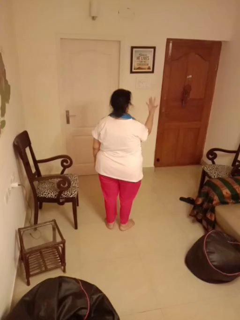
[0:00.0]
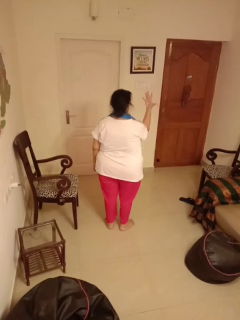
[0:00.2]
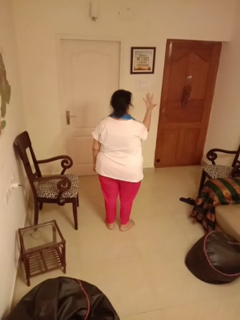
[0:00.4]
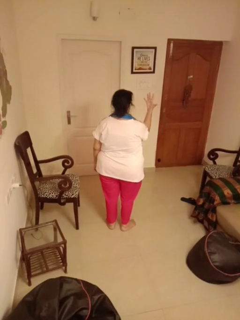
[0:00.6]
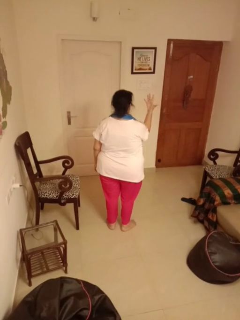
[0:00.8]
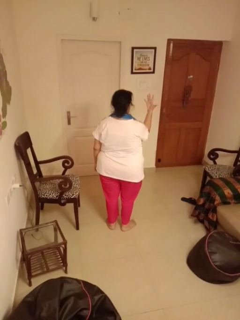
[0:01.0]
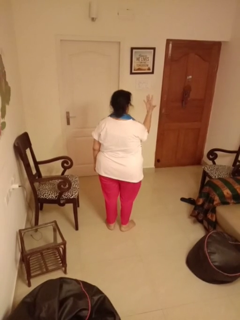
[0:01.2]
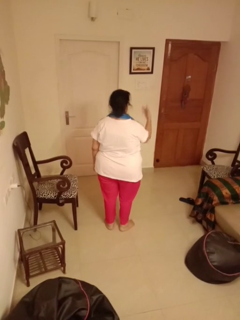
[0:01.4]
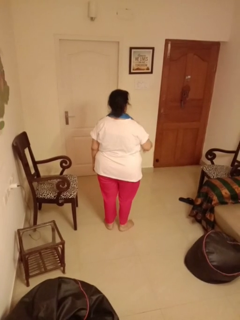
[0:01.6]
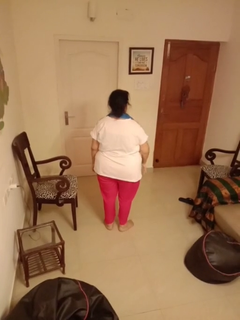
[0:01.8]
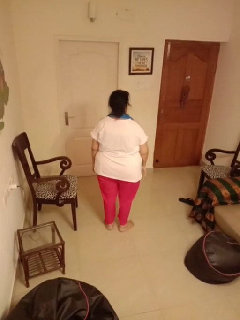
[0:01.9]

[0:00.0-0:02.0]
person gestures number five

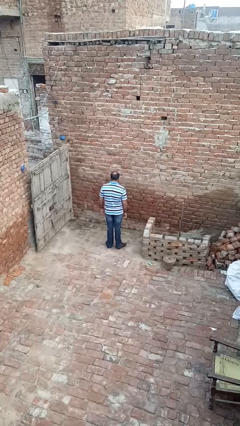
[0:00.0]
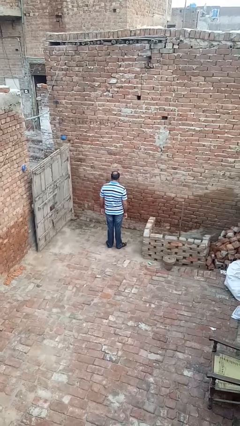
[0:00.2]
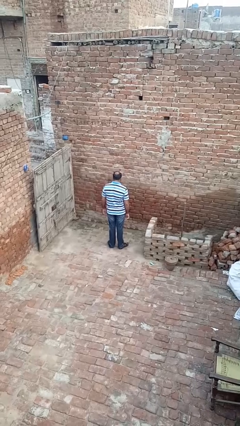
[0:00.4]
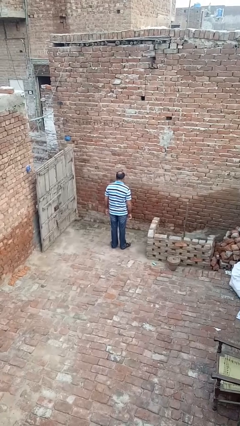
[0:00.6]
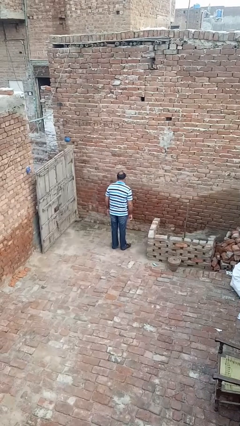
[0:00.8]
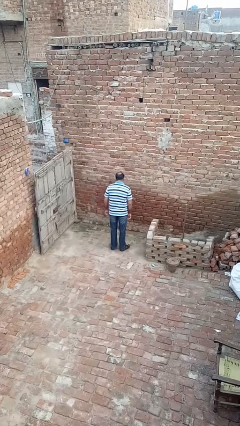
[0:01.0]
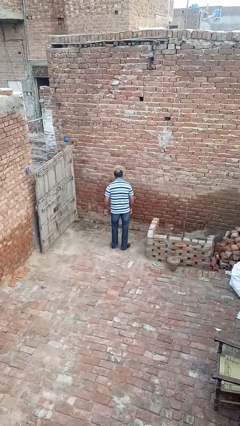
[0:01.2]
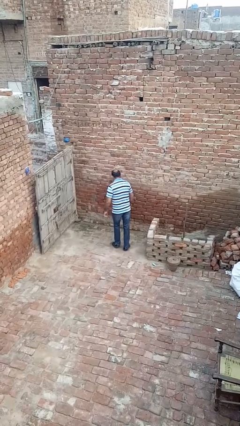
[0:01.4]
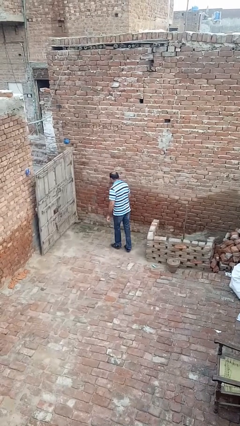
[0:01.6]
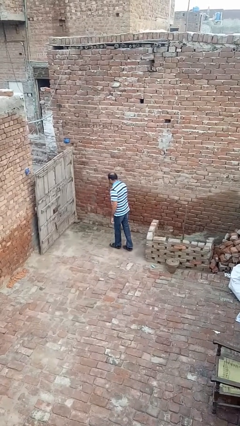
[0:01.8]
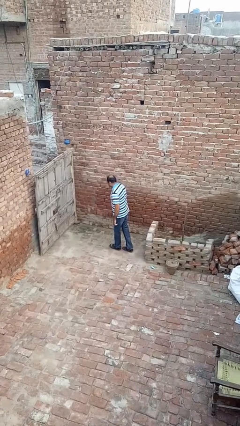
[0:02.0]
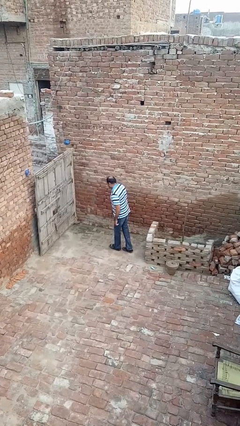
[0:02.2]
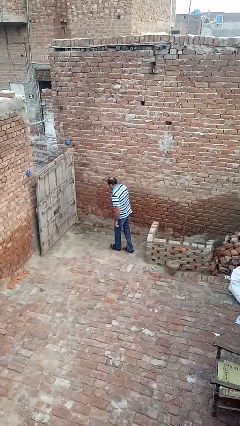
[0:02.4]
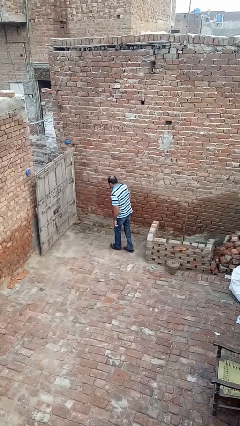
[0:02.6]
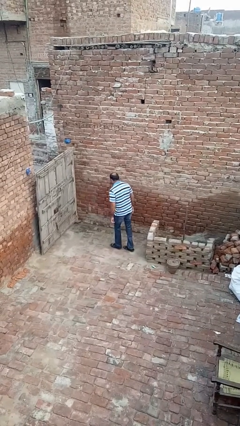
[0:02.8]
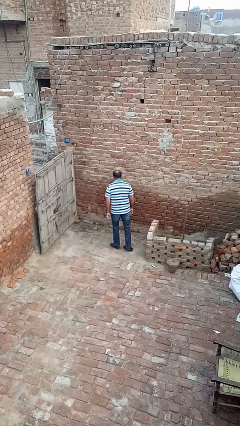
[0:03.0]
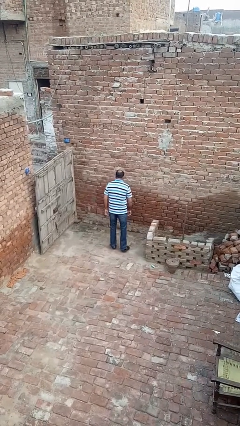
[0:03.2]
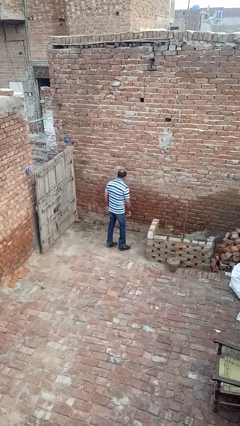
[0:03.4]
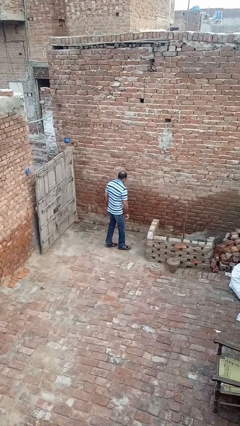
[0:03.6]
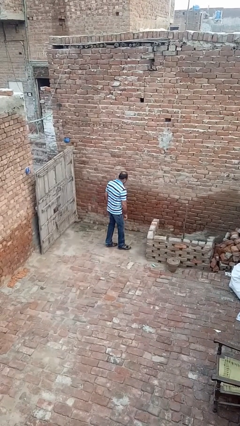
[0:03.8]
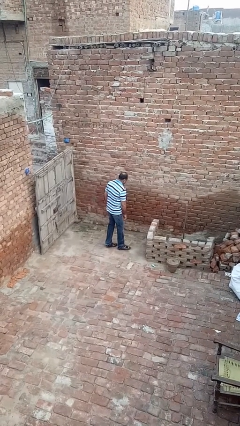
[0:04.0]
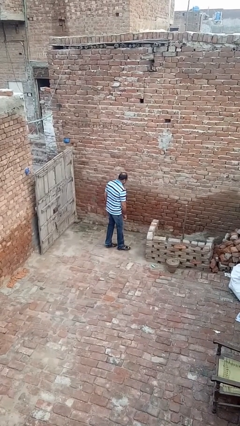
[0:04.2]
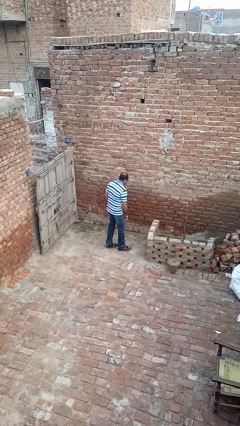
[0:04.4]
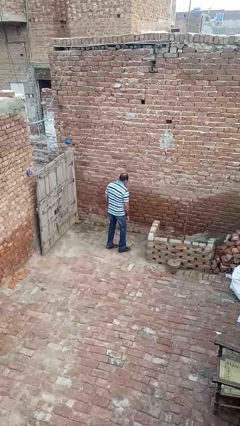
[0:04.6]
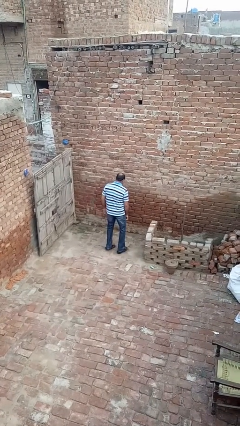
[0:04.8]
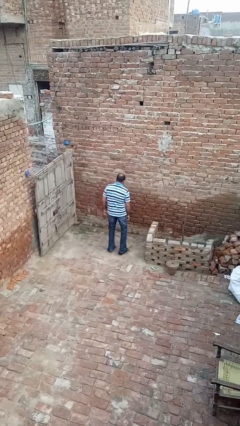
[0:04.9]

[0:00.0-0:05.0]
person twirls

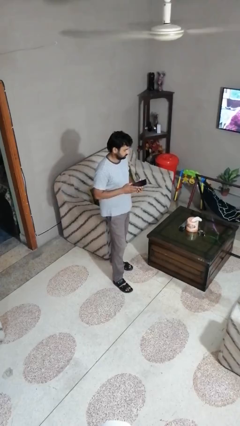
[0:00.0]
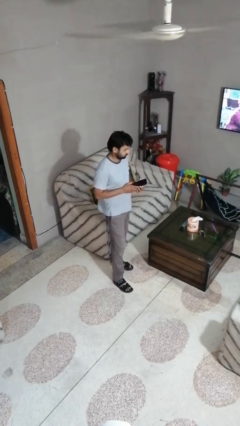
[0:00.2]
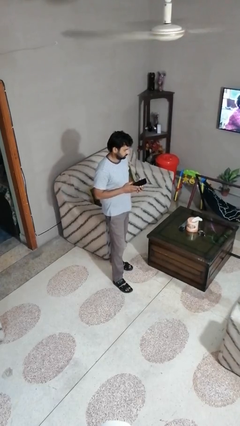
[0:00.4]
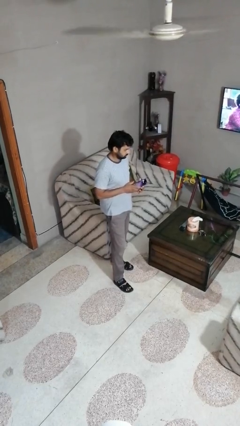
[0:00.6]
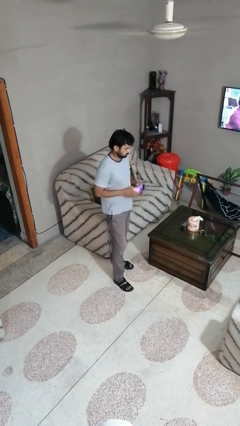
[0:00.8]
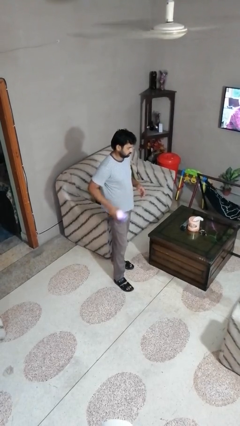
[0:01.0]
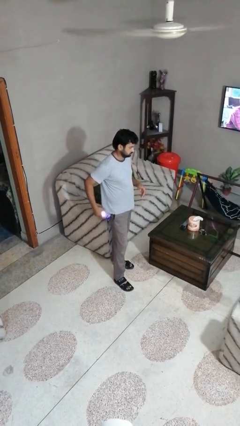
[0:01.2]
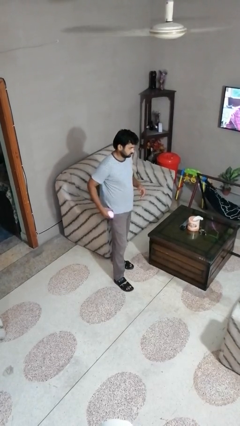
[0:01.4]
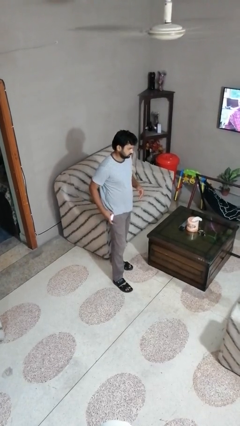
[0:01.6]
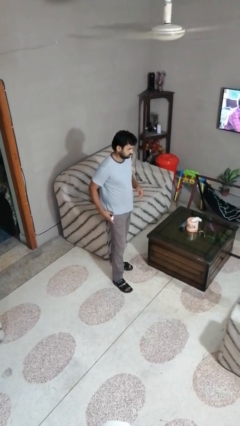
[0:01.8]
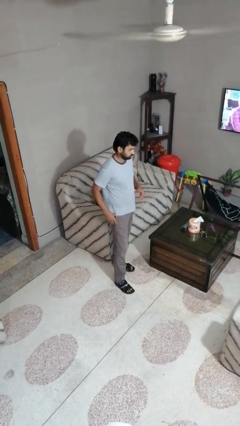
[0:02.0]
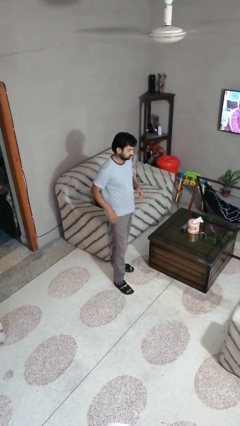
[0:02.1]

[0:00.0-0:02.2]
person puts phone into pocket

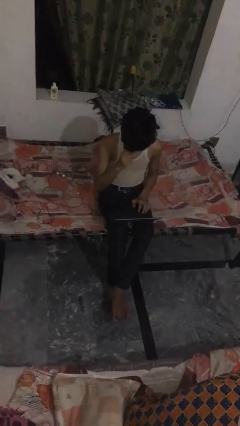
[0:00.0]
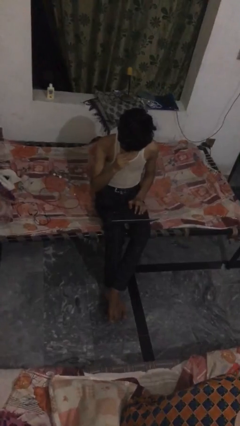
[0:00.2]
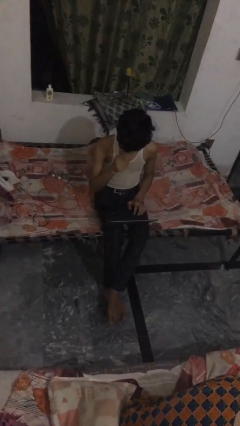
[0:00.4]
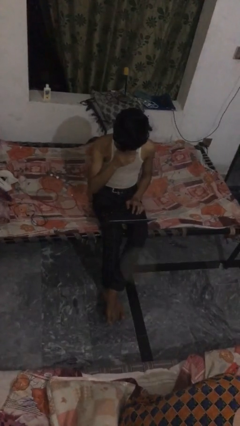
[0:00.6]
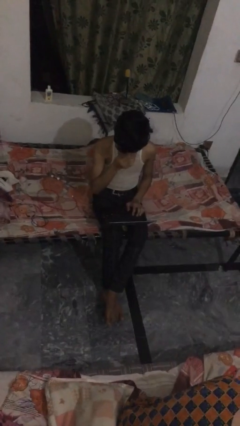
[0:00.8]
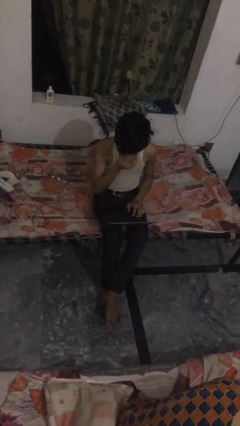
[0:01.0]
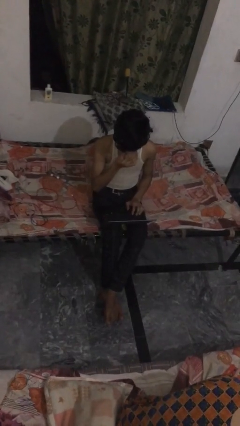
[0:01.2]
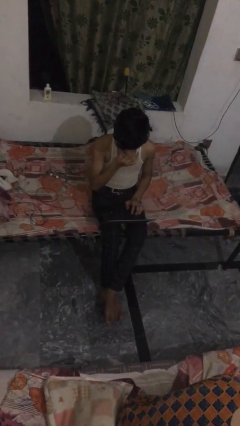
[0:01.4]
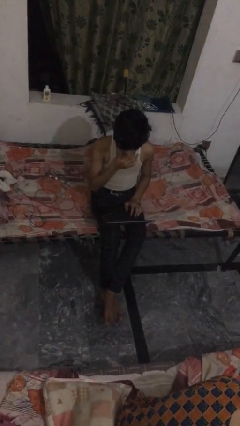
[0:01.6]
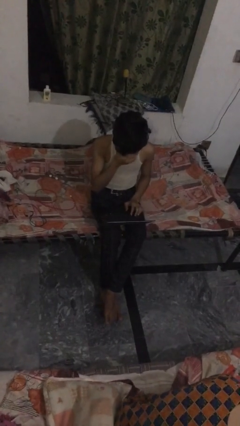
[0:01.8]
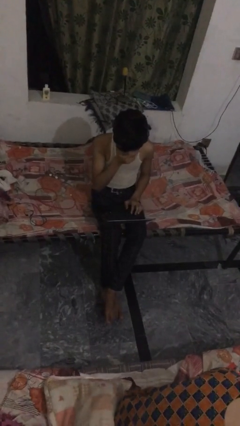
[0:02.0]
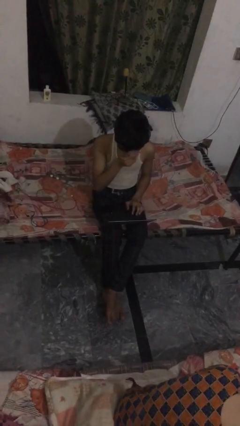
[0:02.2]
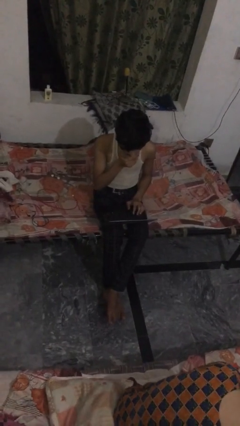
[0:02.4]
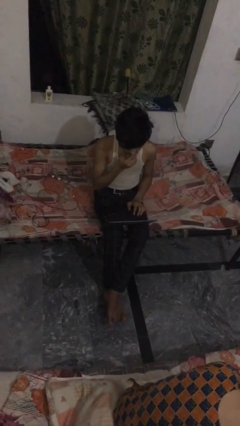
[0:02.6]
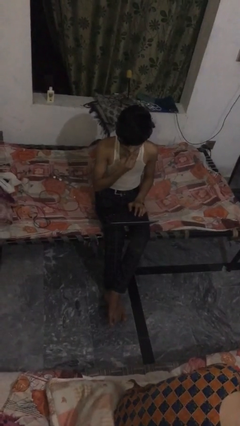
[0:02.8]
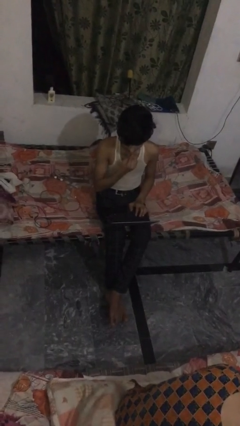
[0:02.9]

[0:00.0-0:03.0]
person interacts with laptop

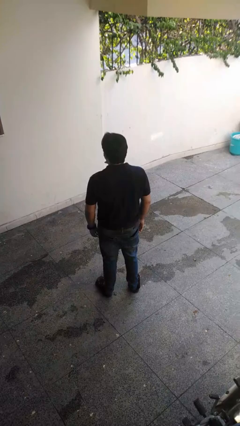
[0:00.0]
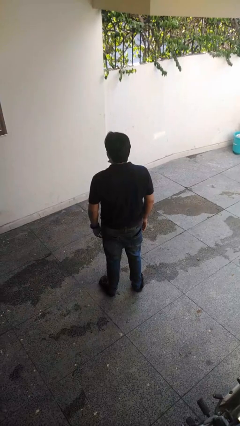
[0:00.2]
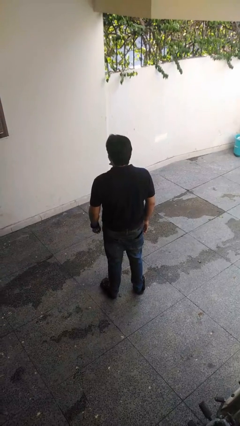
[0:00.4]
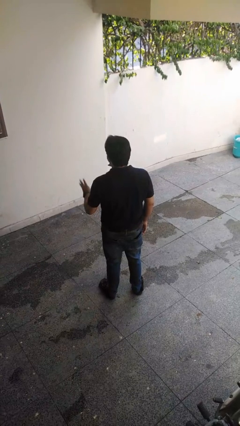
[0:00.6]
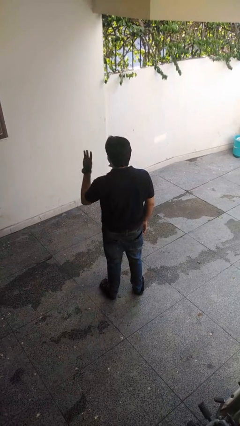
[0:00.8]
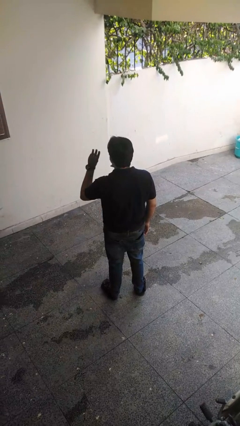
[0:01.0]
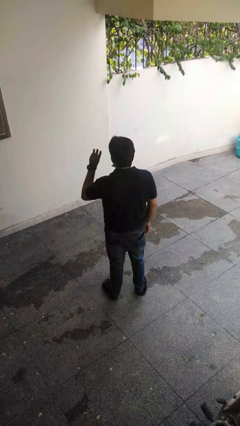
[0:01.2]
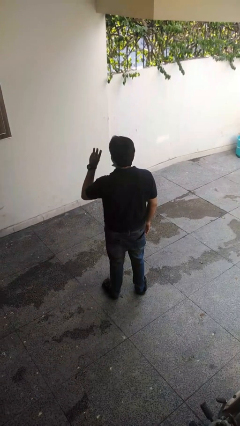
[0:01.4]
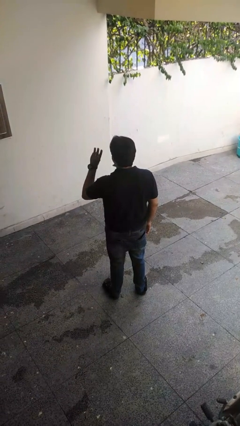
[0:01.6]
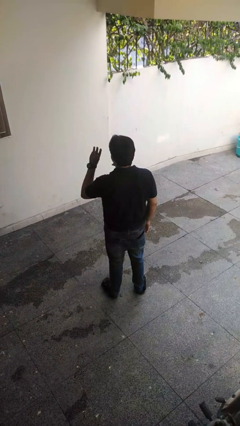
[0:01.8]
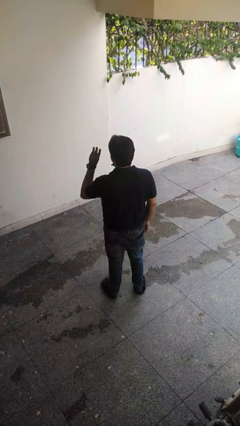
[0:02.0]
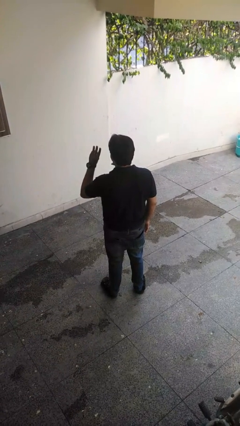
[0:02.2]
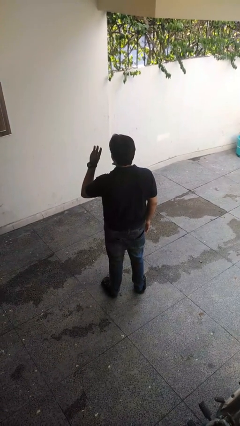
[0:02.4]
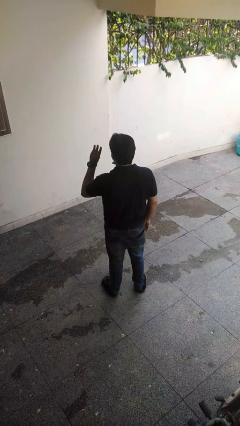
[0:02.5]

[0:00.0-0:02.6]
person gestures number three

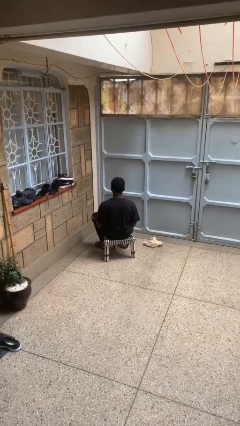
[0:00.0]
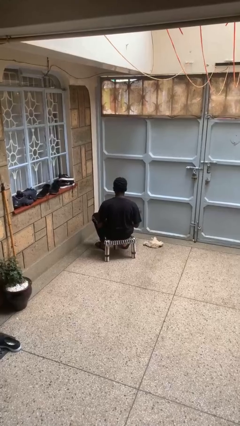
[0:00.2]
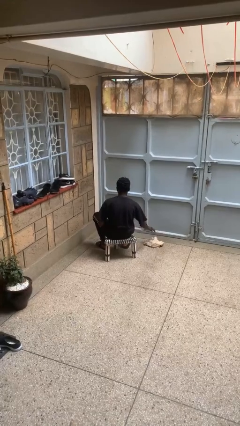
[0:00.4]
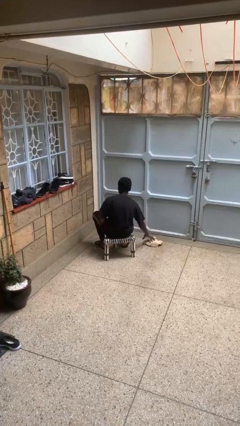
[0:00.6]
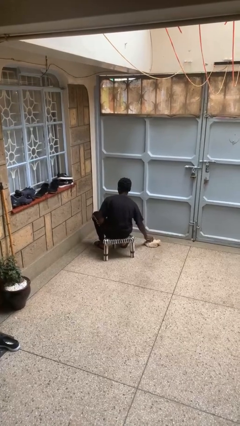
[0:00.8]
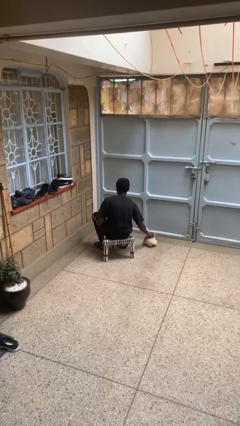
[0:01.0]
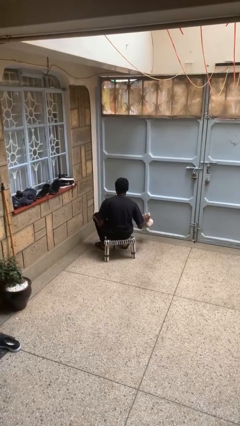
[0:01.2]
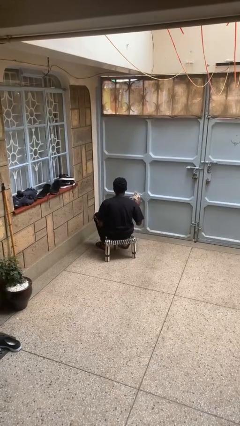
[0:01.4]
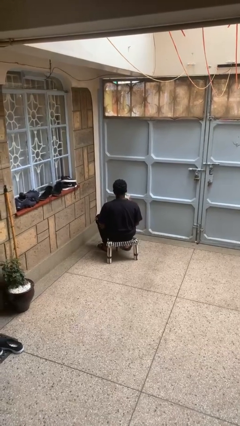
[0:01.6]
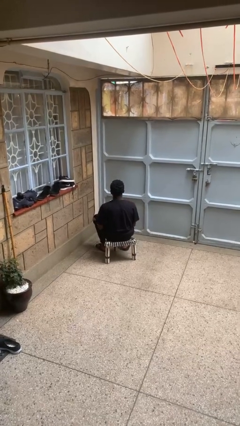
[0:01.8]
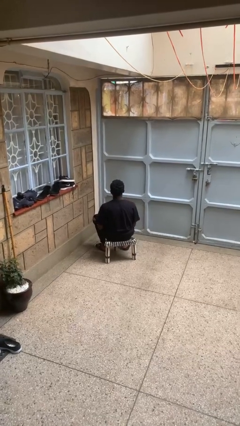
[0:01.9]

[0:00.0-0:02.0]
person picks up object from floor

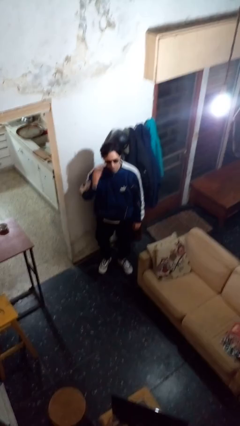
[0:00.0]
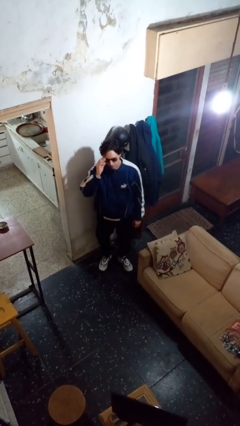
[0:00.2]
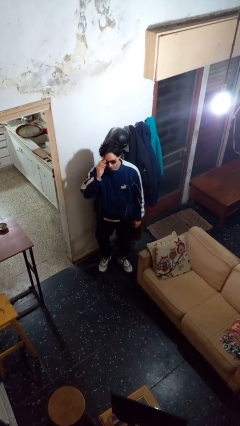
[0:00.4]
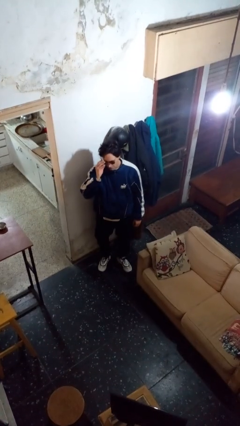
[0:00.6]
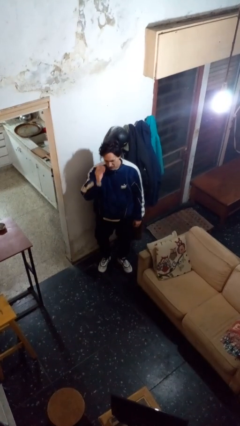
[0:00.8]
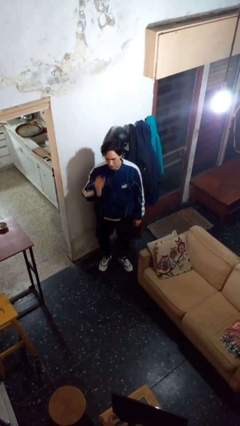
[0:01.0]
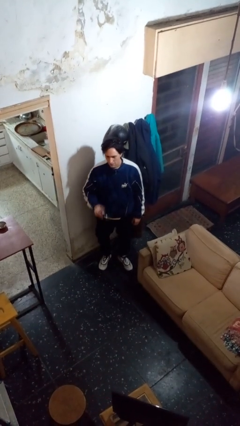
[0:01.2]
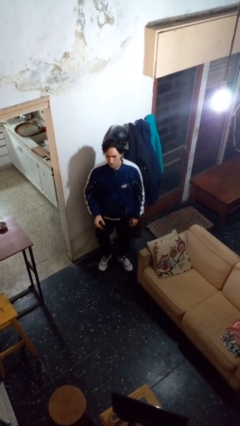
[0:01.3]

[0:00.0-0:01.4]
person takes off sunglasses
